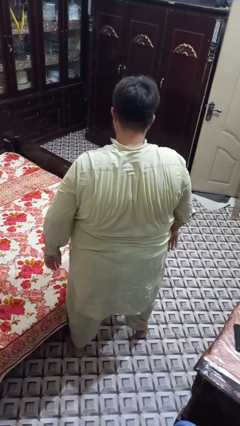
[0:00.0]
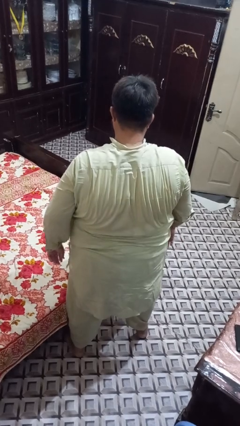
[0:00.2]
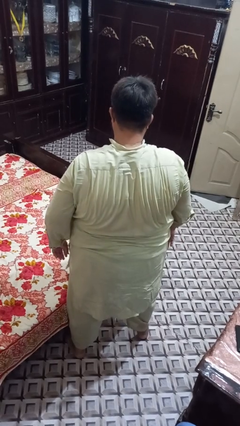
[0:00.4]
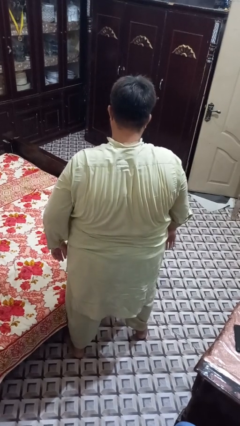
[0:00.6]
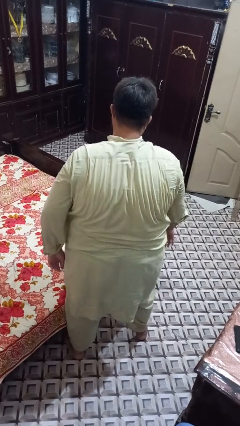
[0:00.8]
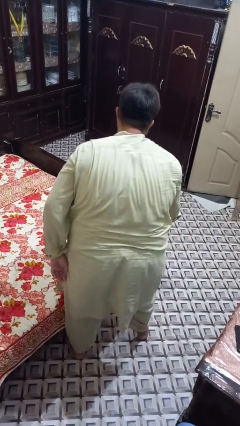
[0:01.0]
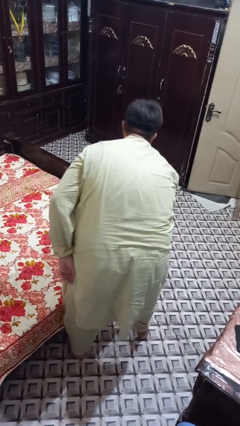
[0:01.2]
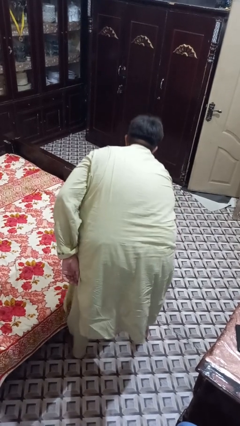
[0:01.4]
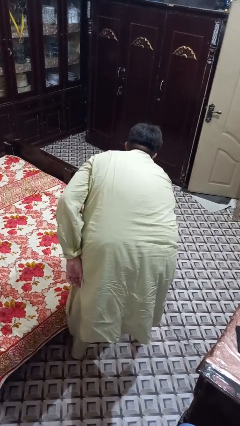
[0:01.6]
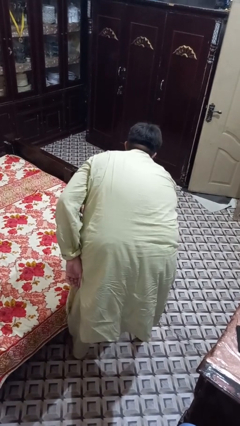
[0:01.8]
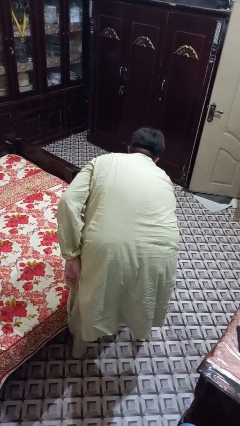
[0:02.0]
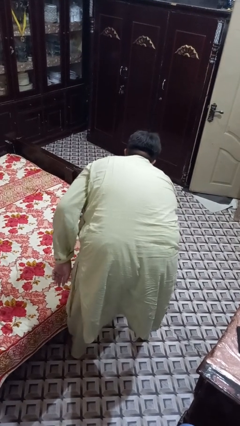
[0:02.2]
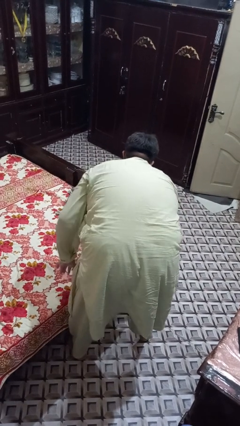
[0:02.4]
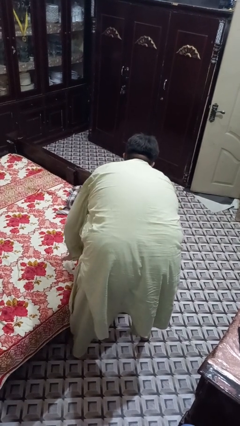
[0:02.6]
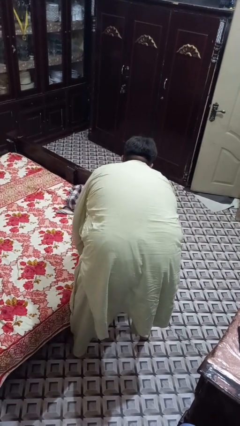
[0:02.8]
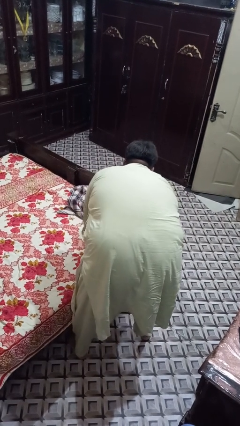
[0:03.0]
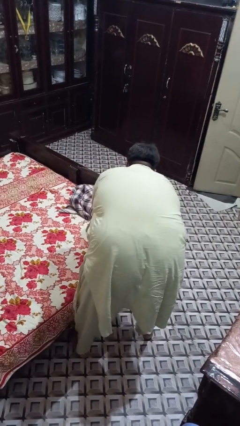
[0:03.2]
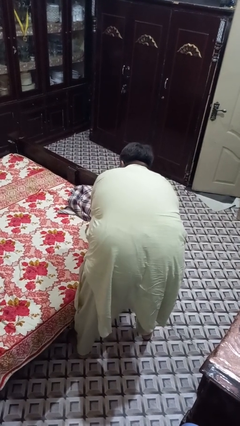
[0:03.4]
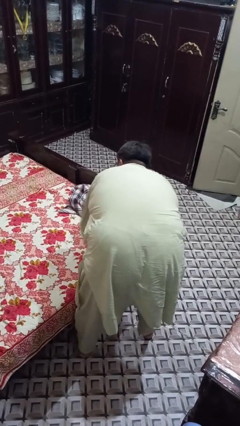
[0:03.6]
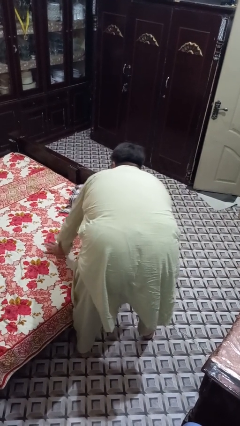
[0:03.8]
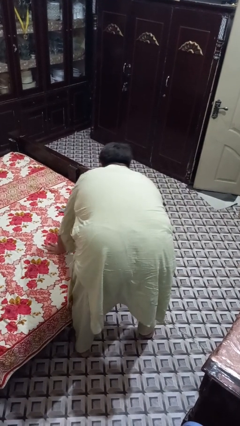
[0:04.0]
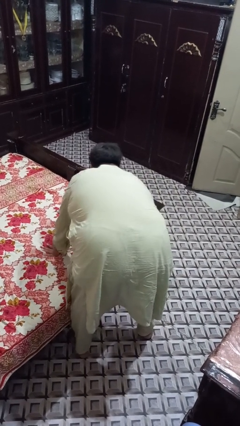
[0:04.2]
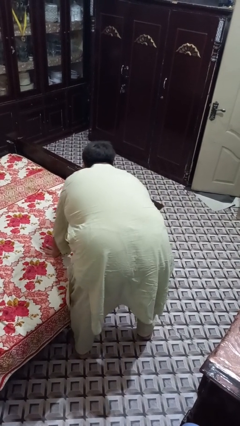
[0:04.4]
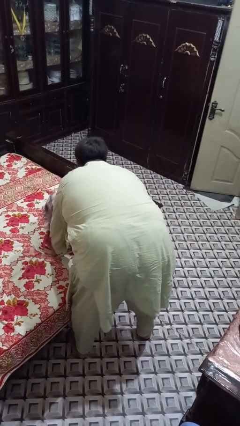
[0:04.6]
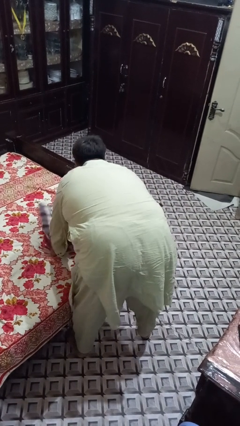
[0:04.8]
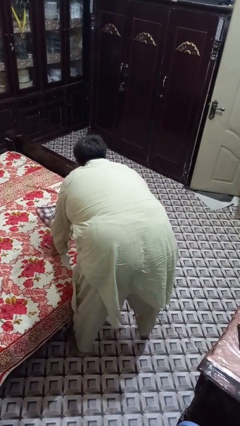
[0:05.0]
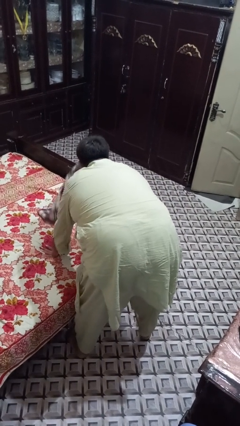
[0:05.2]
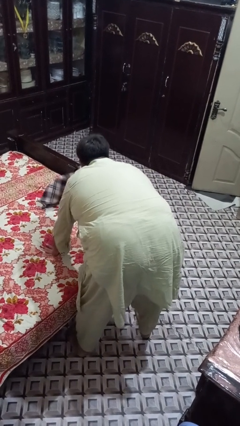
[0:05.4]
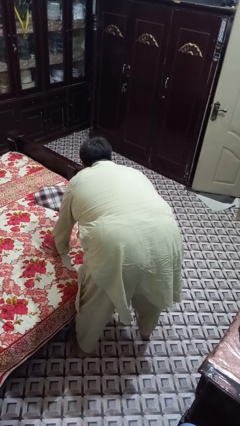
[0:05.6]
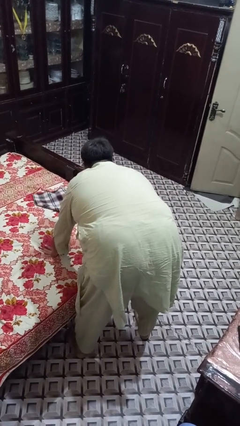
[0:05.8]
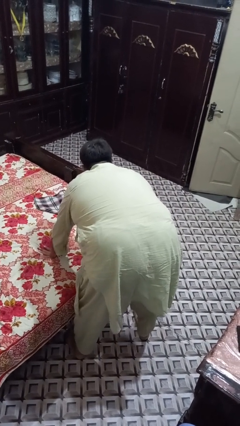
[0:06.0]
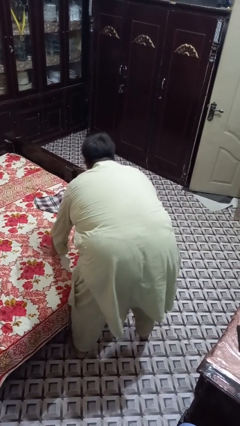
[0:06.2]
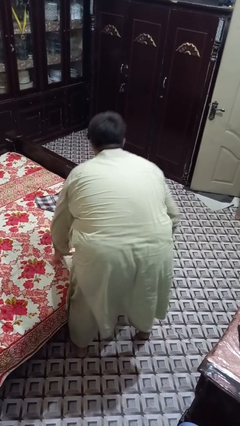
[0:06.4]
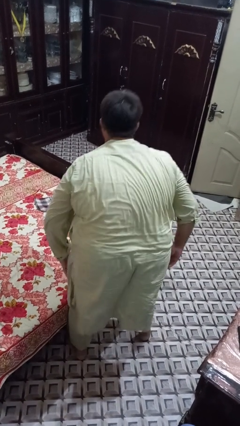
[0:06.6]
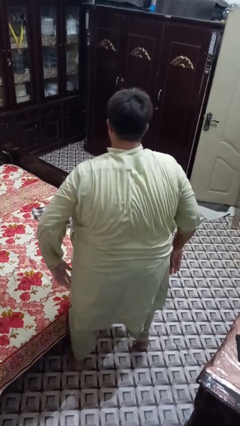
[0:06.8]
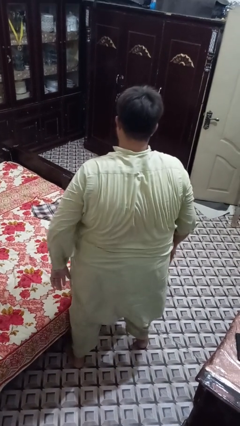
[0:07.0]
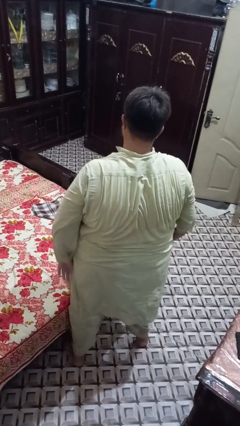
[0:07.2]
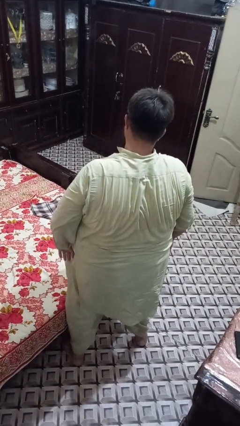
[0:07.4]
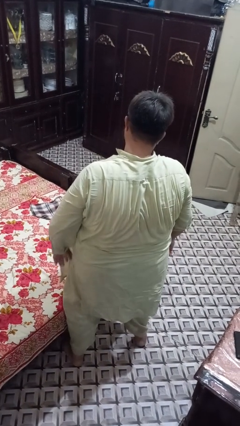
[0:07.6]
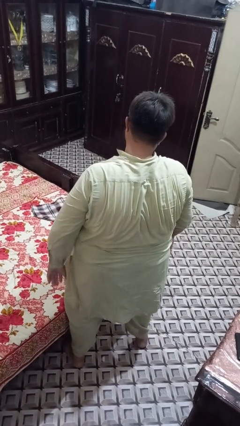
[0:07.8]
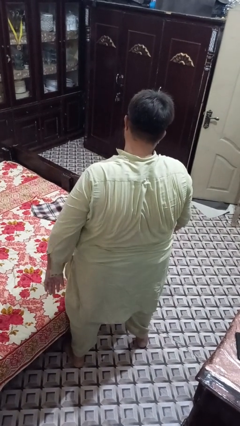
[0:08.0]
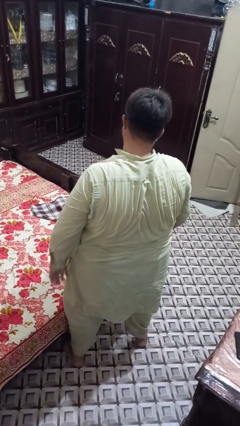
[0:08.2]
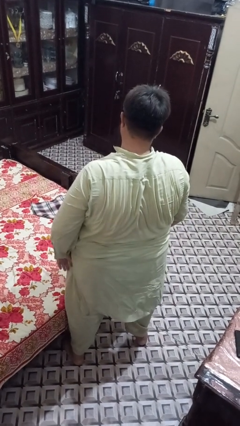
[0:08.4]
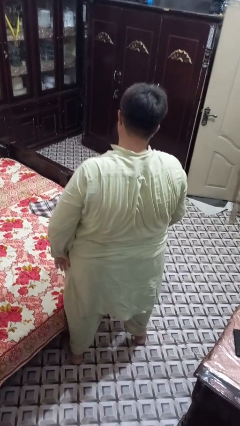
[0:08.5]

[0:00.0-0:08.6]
person makes bed

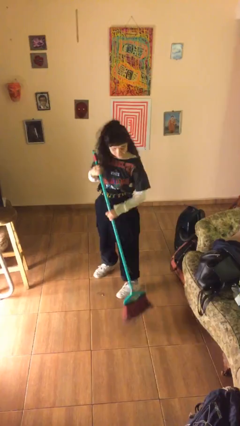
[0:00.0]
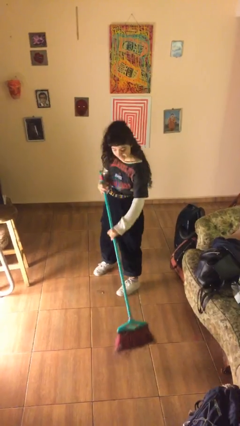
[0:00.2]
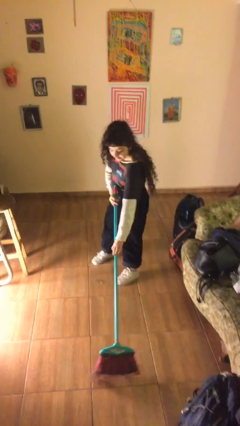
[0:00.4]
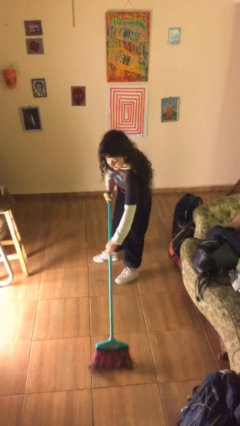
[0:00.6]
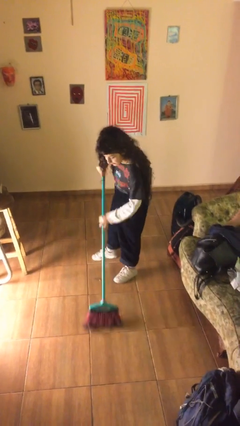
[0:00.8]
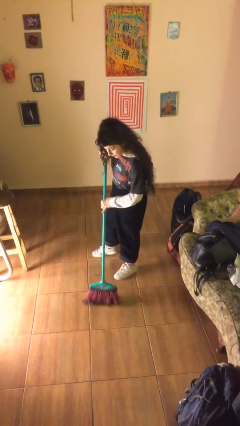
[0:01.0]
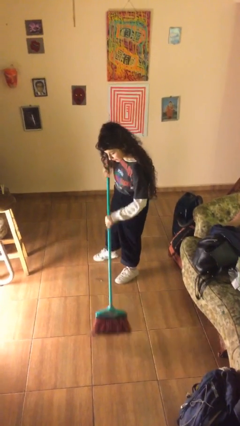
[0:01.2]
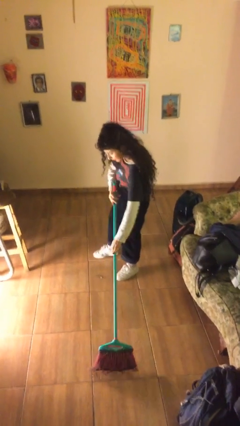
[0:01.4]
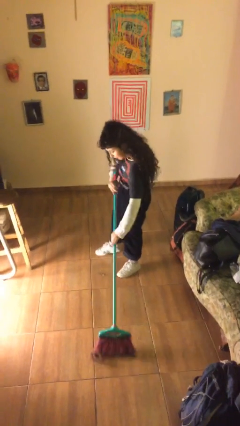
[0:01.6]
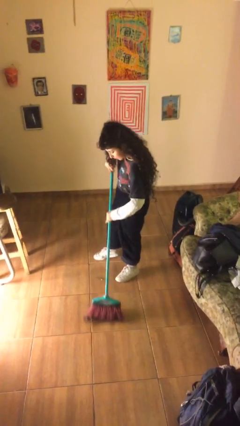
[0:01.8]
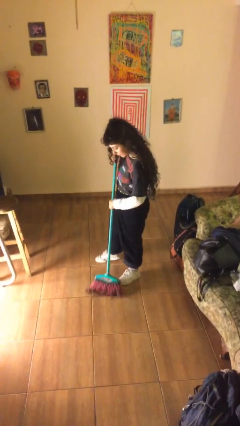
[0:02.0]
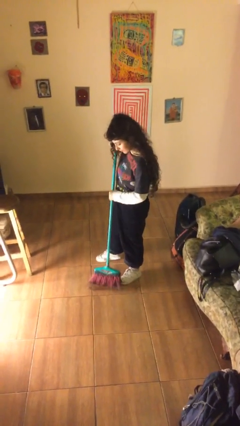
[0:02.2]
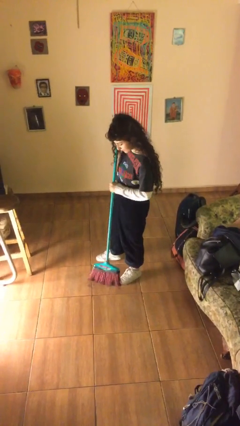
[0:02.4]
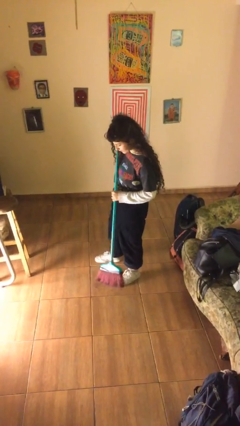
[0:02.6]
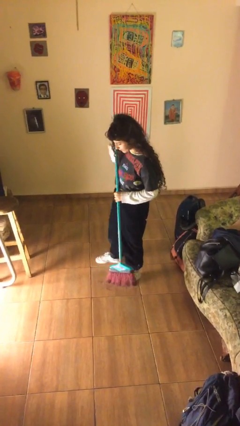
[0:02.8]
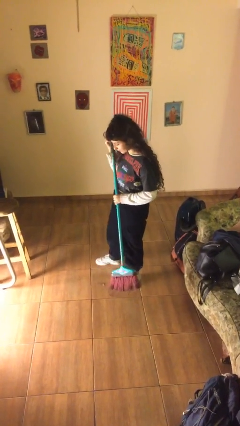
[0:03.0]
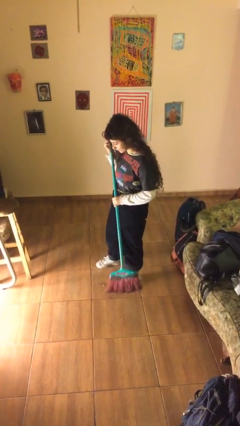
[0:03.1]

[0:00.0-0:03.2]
person sweeps floor

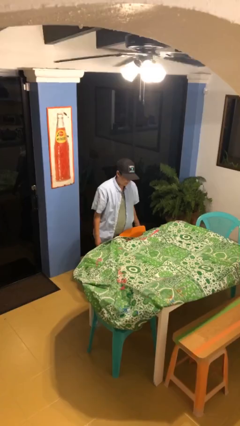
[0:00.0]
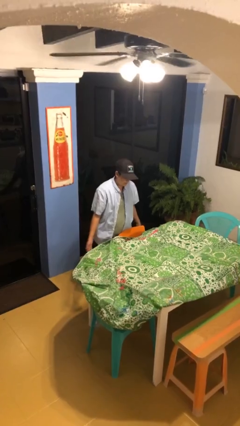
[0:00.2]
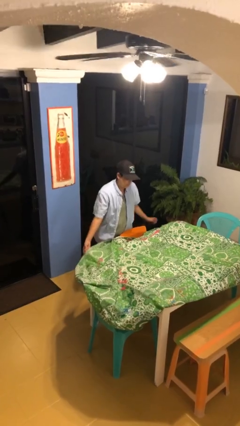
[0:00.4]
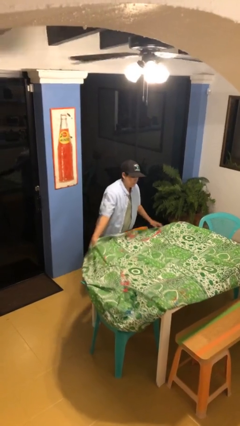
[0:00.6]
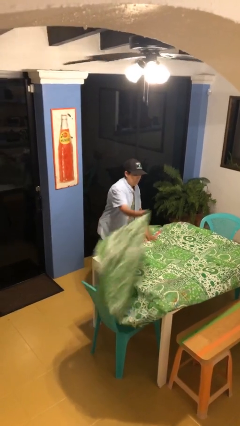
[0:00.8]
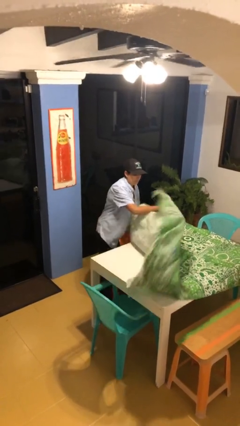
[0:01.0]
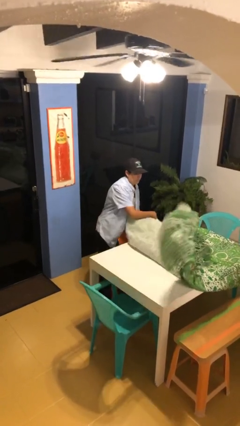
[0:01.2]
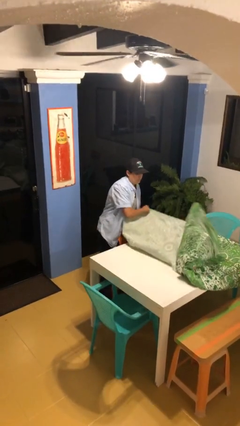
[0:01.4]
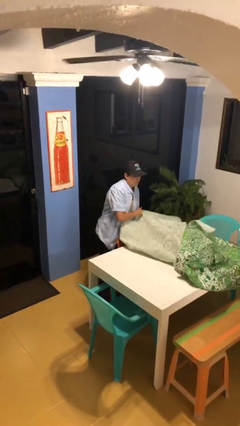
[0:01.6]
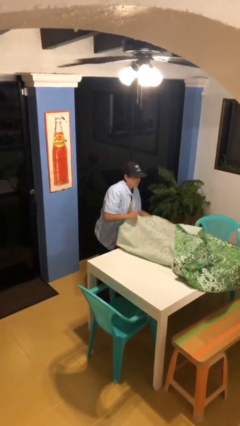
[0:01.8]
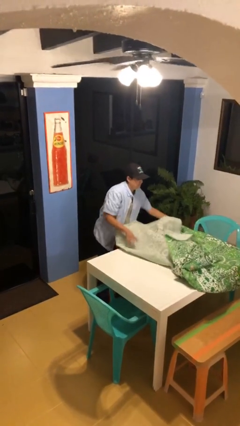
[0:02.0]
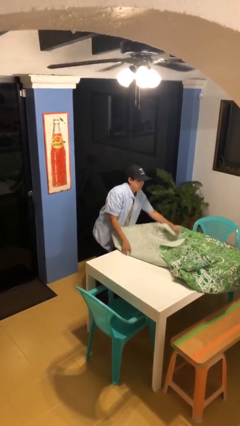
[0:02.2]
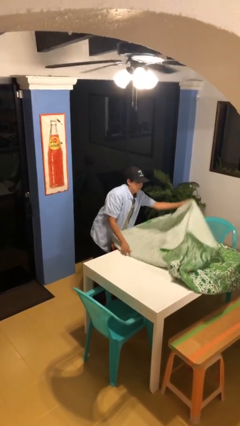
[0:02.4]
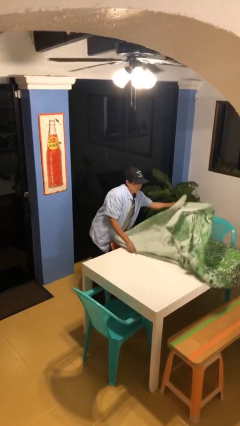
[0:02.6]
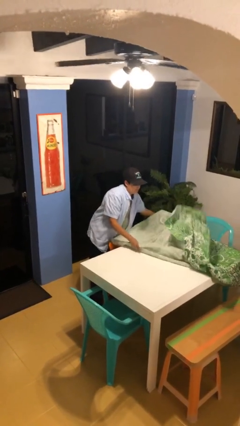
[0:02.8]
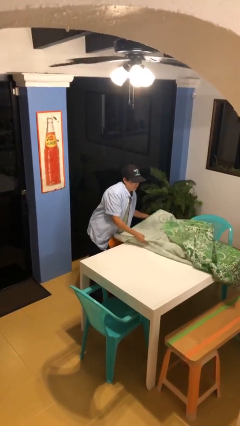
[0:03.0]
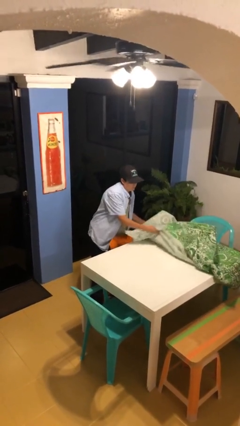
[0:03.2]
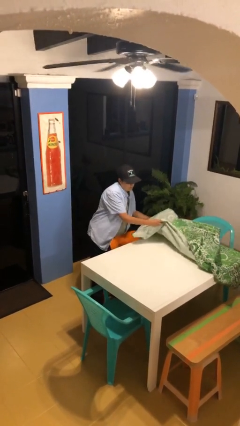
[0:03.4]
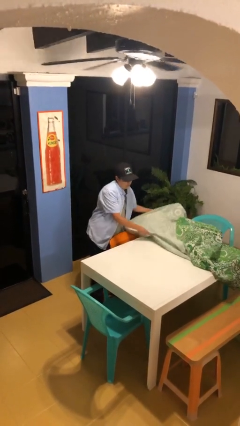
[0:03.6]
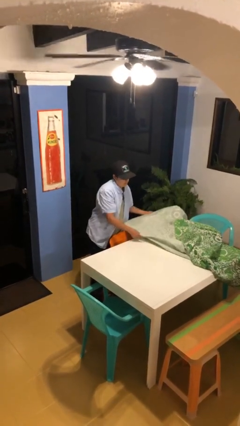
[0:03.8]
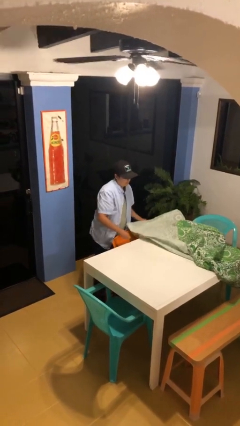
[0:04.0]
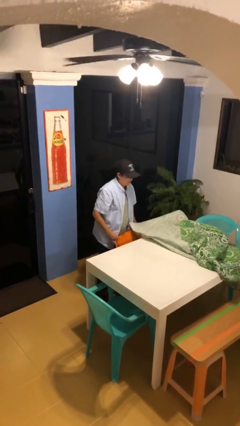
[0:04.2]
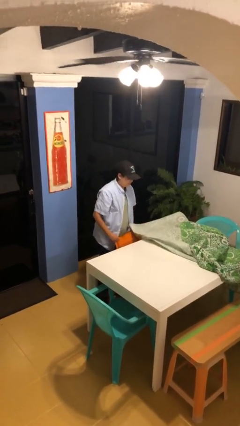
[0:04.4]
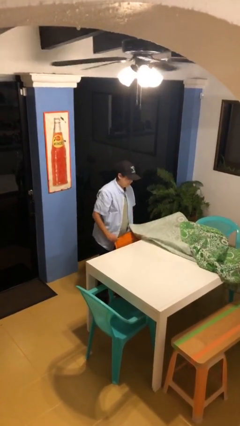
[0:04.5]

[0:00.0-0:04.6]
person folds tablecloth

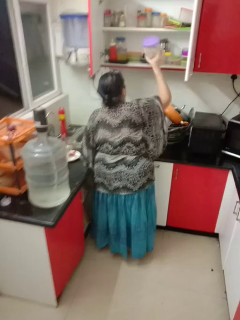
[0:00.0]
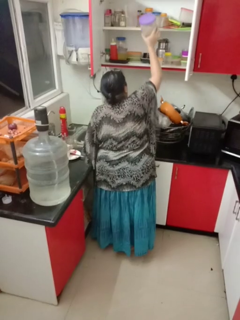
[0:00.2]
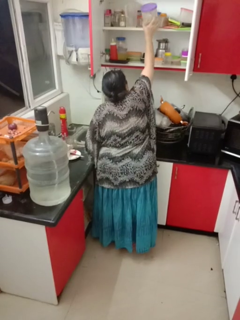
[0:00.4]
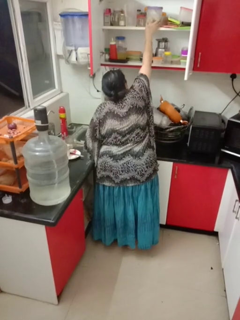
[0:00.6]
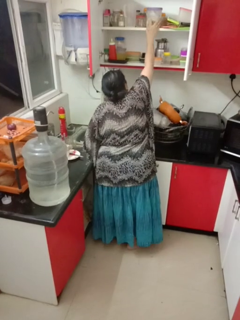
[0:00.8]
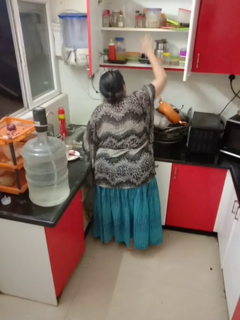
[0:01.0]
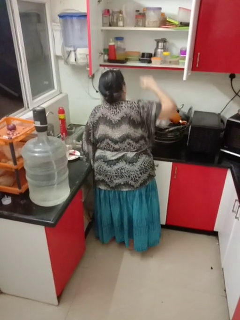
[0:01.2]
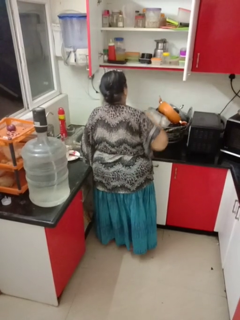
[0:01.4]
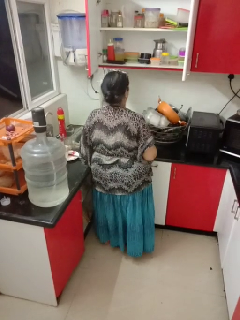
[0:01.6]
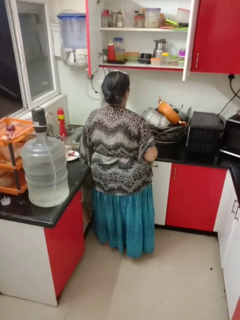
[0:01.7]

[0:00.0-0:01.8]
person puts object in cabinet

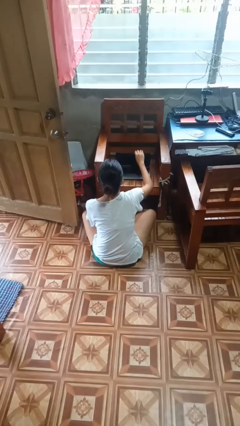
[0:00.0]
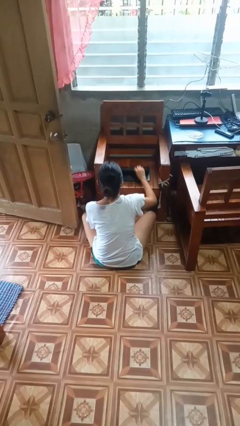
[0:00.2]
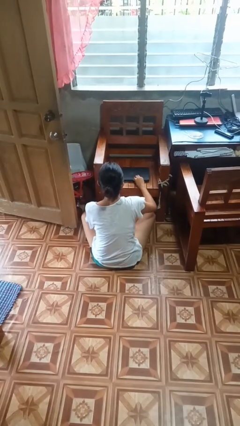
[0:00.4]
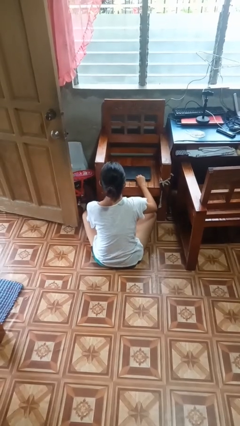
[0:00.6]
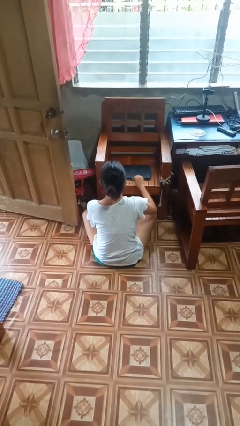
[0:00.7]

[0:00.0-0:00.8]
person closes laptop
